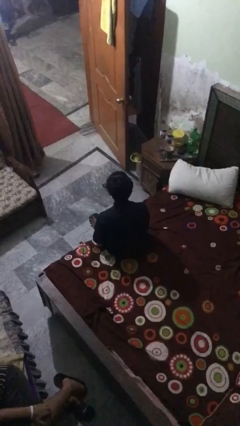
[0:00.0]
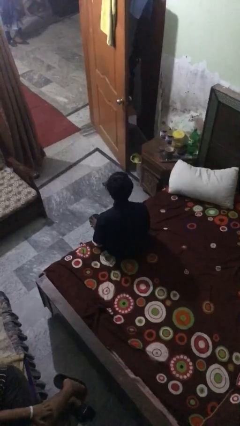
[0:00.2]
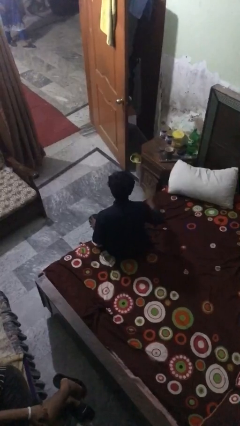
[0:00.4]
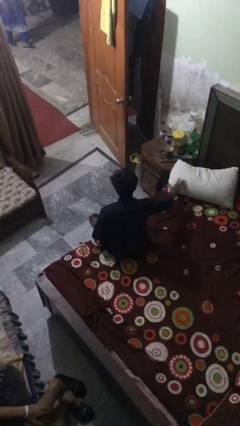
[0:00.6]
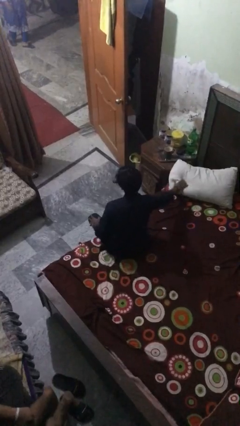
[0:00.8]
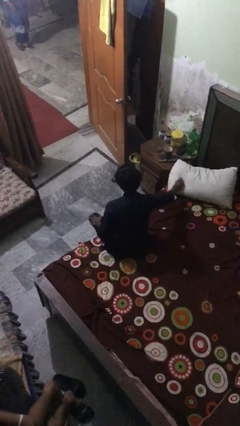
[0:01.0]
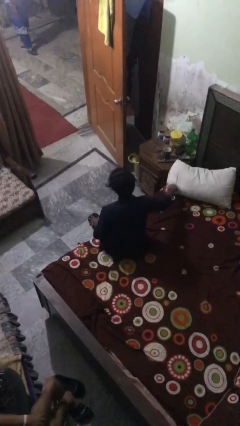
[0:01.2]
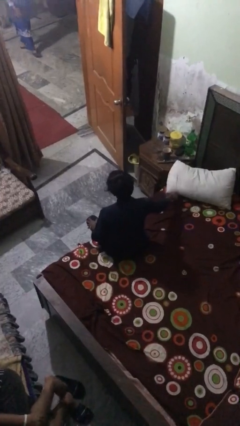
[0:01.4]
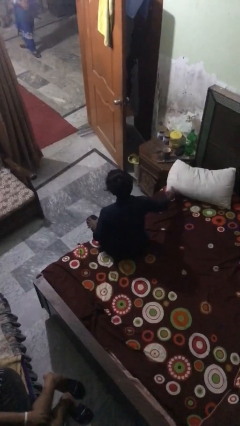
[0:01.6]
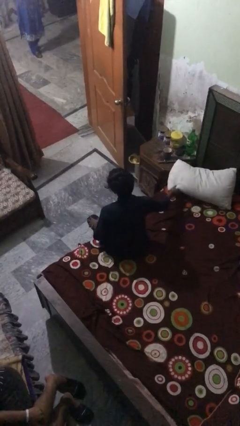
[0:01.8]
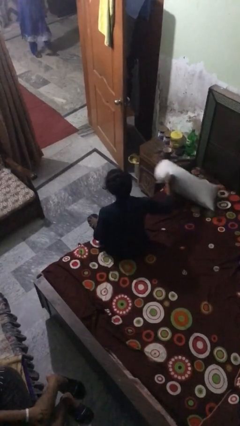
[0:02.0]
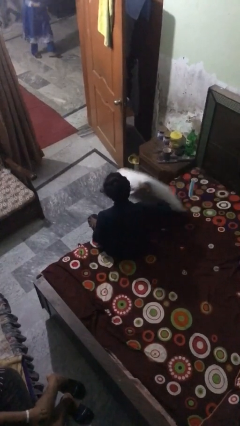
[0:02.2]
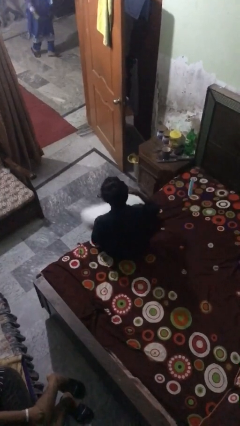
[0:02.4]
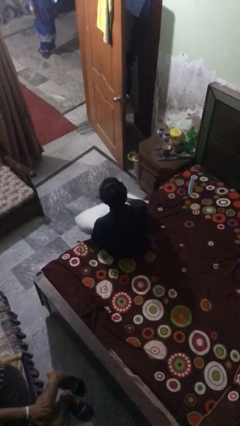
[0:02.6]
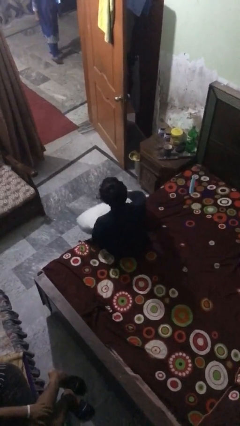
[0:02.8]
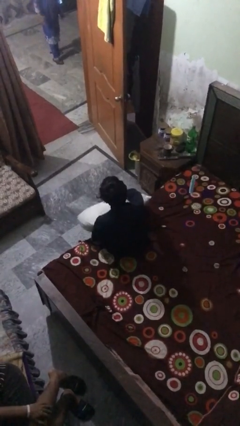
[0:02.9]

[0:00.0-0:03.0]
person picks up object from bed

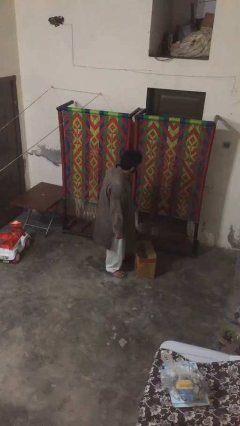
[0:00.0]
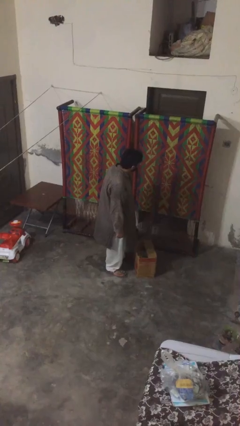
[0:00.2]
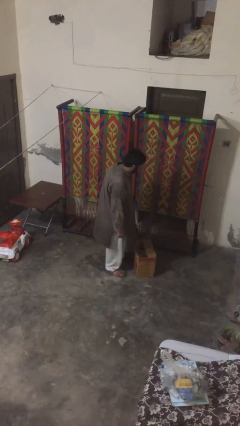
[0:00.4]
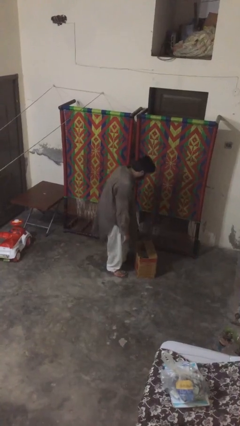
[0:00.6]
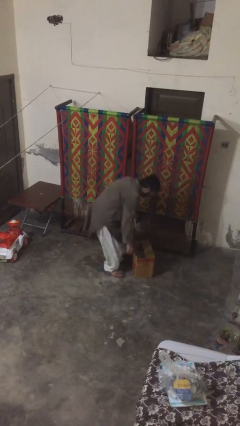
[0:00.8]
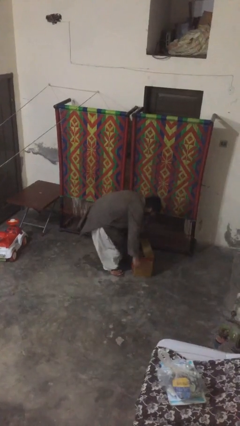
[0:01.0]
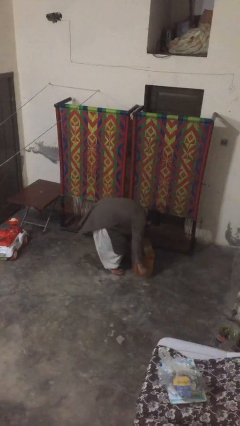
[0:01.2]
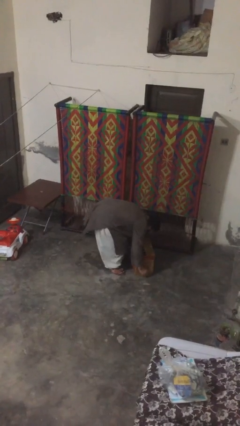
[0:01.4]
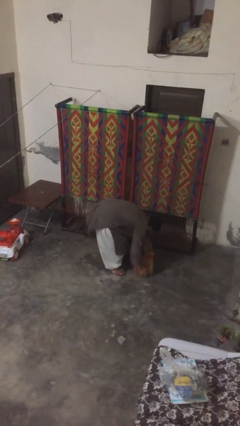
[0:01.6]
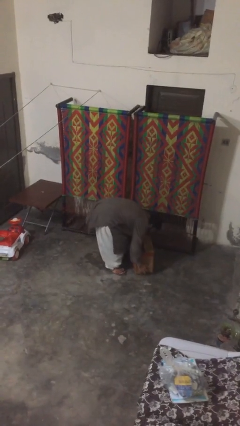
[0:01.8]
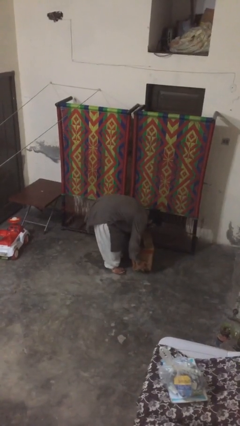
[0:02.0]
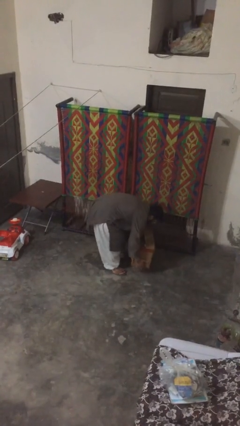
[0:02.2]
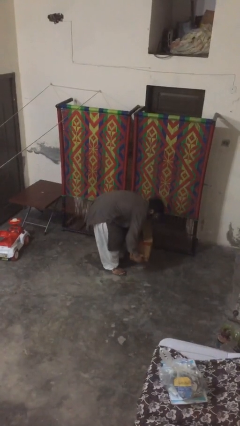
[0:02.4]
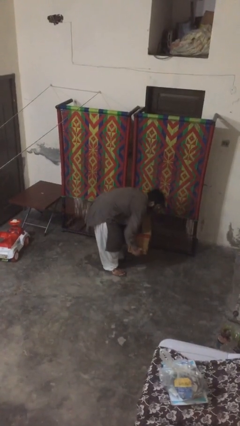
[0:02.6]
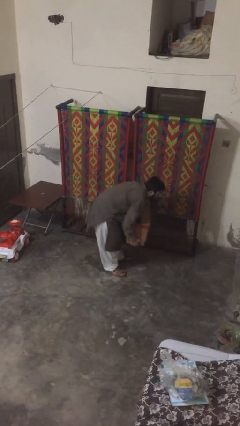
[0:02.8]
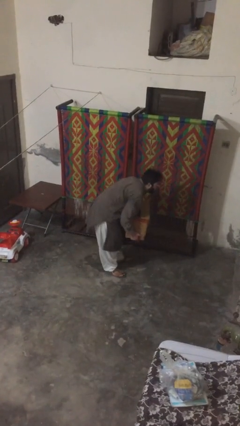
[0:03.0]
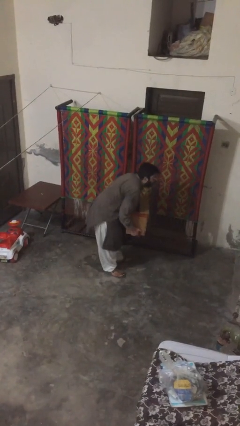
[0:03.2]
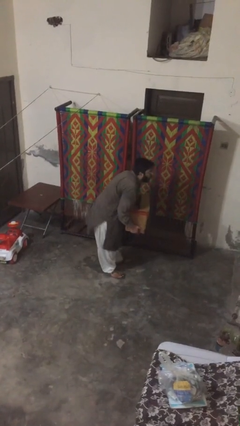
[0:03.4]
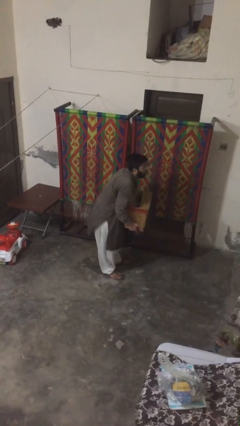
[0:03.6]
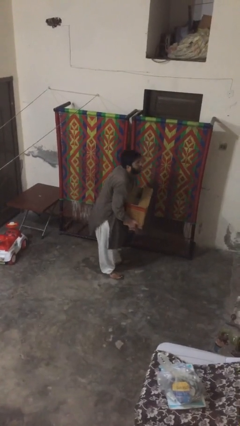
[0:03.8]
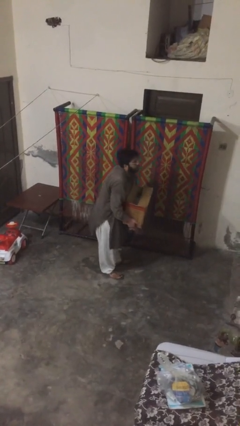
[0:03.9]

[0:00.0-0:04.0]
person picks up object from floor

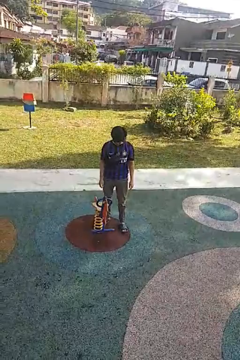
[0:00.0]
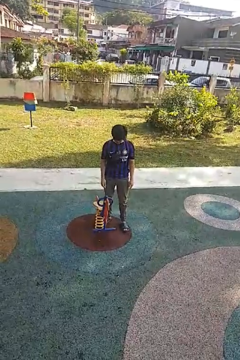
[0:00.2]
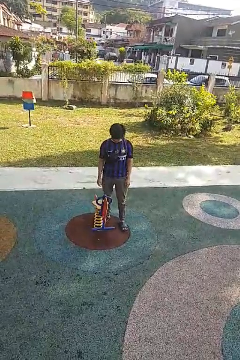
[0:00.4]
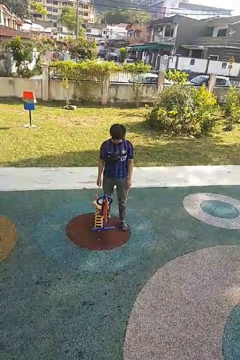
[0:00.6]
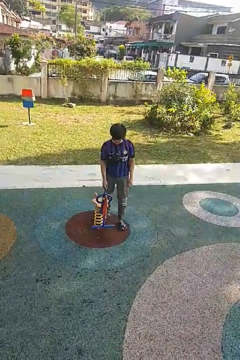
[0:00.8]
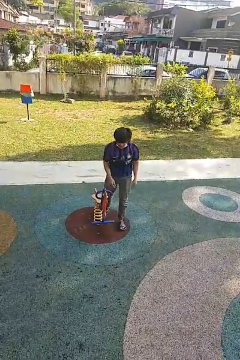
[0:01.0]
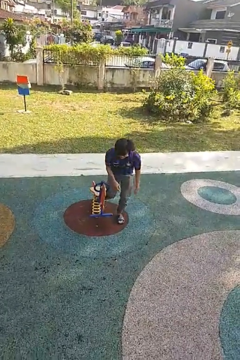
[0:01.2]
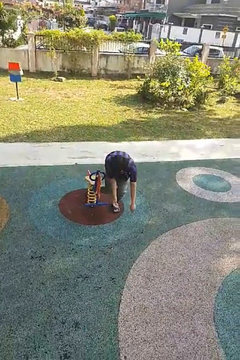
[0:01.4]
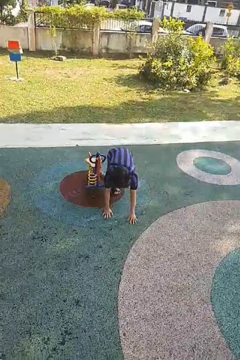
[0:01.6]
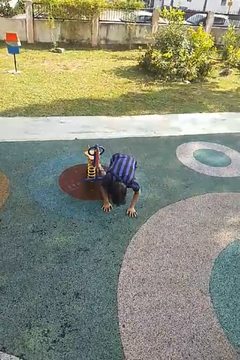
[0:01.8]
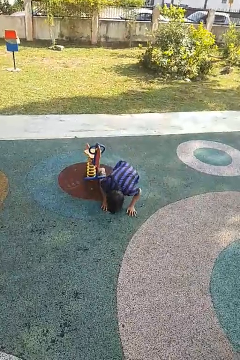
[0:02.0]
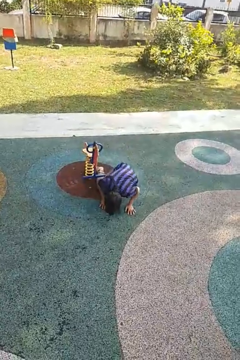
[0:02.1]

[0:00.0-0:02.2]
person trips on object on floor

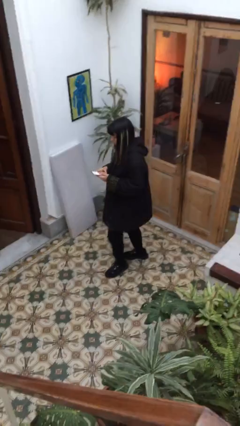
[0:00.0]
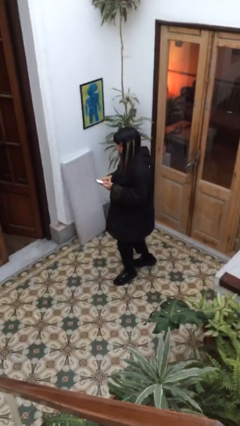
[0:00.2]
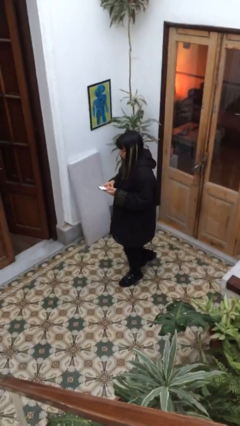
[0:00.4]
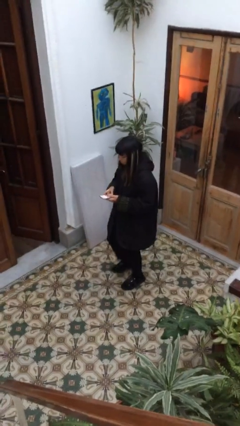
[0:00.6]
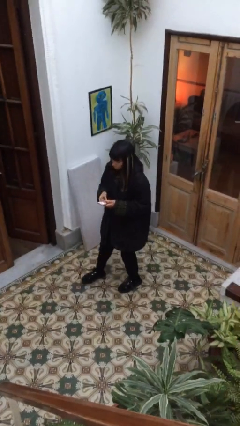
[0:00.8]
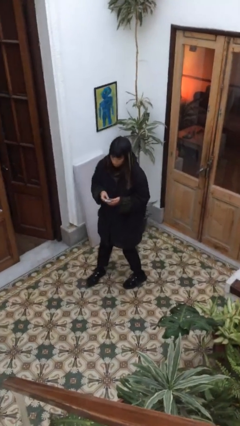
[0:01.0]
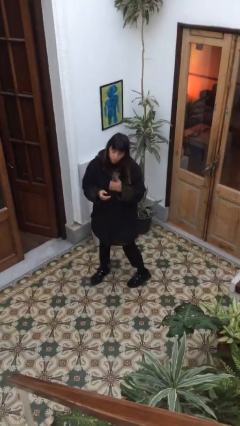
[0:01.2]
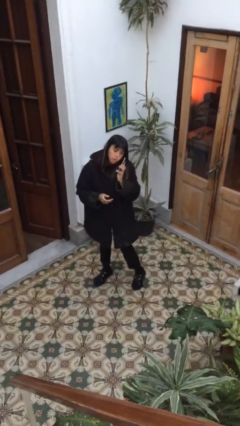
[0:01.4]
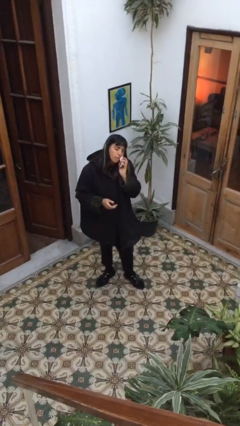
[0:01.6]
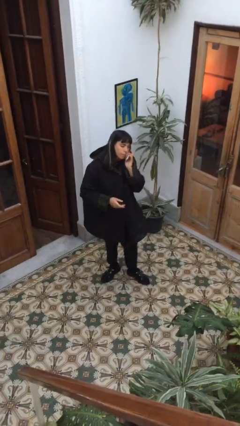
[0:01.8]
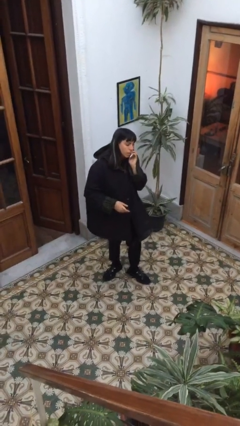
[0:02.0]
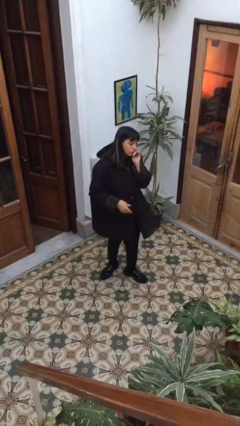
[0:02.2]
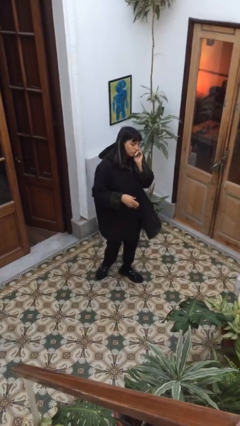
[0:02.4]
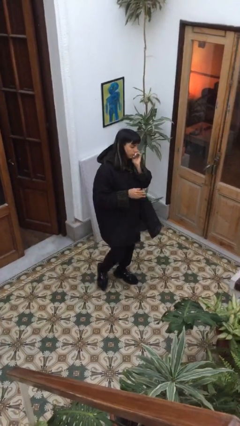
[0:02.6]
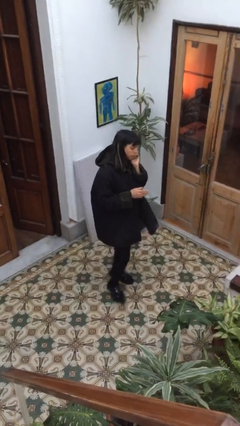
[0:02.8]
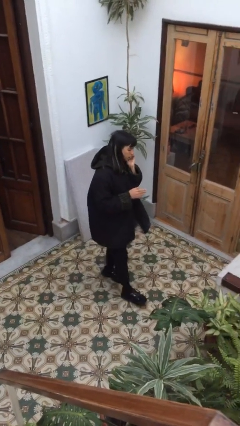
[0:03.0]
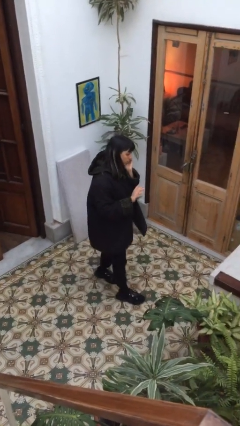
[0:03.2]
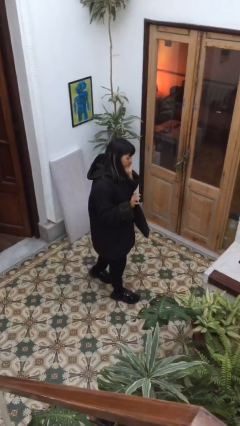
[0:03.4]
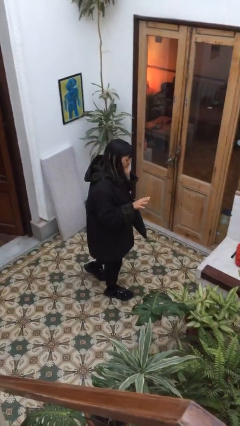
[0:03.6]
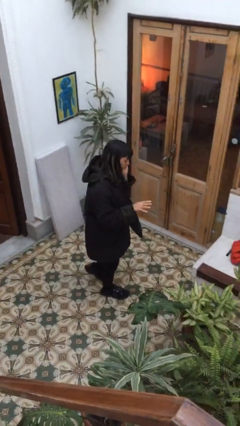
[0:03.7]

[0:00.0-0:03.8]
person talks on phone

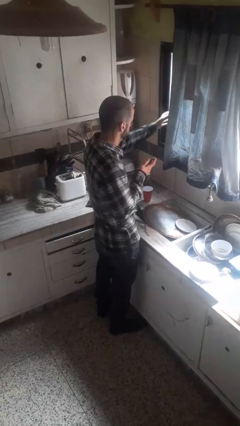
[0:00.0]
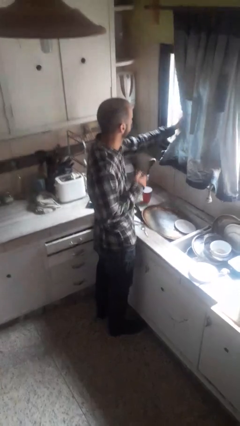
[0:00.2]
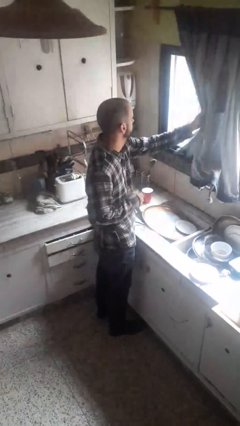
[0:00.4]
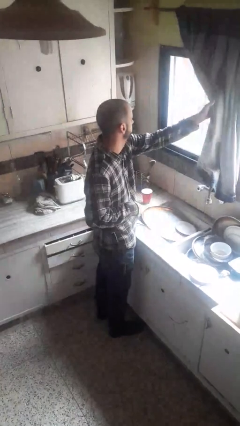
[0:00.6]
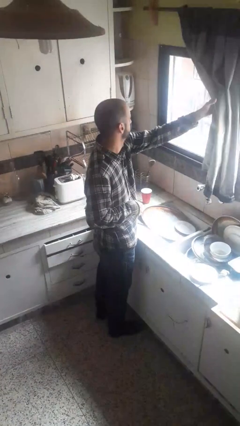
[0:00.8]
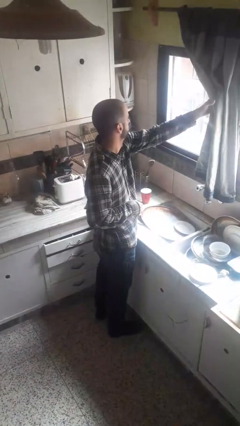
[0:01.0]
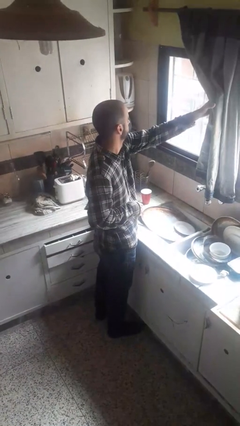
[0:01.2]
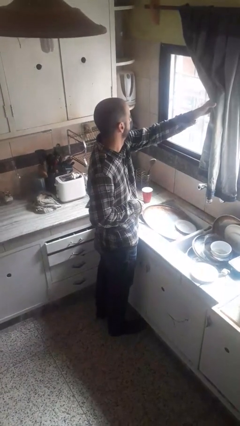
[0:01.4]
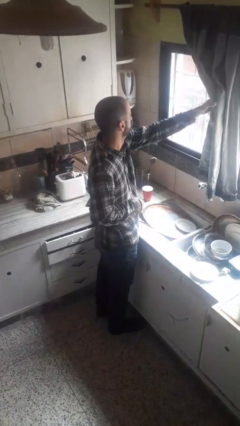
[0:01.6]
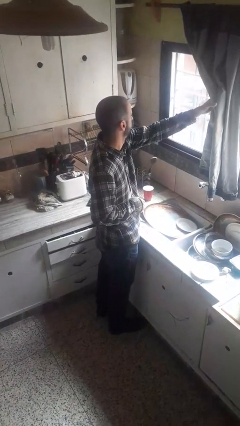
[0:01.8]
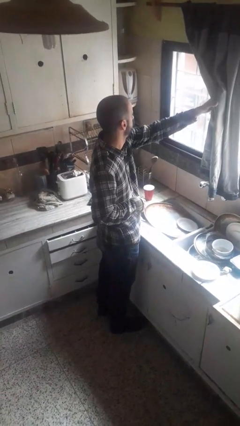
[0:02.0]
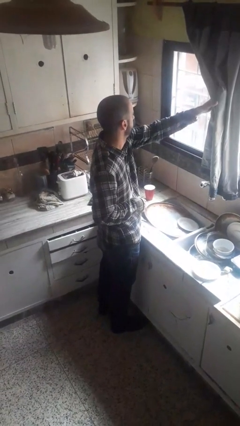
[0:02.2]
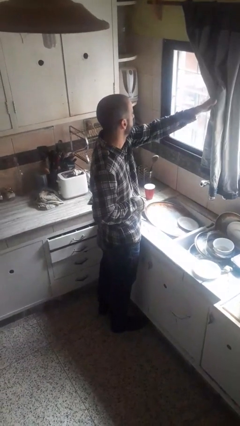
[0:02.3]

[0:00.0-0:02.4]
person opens curtains

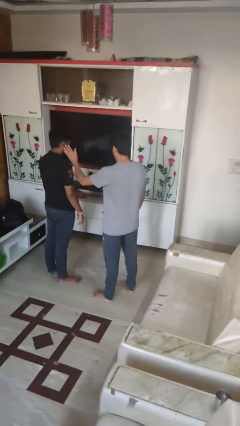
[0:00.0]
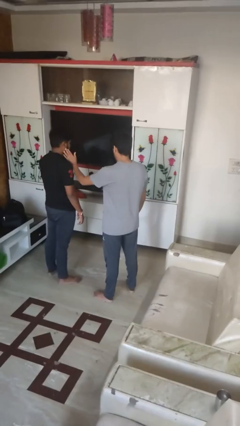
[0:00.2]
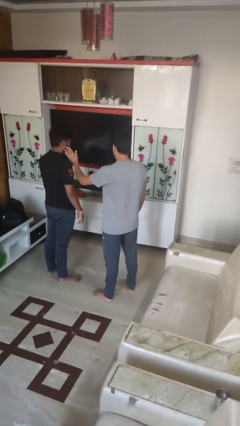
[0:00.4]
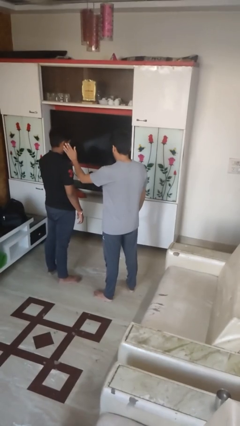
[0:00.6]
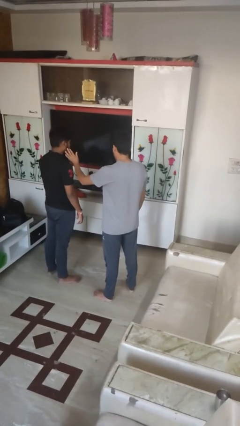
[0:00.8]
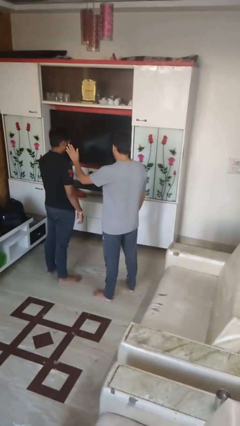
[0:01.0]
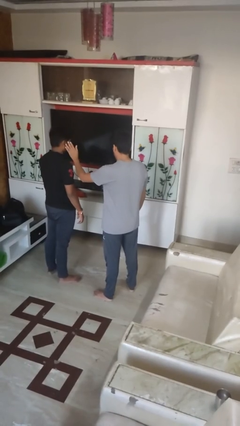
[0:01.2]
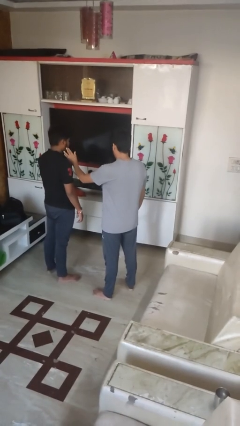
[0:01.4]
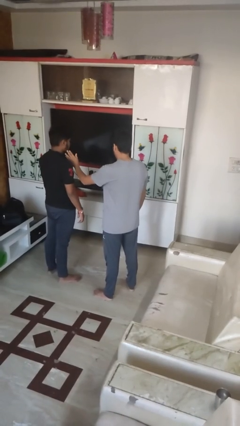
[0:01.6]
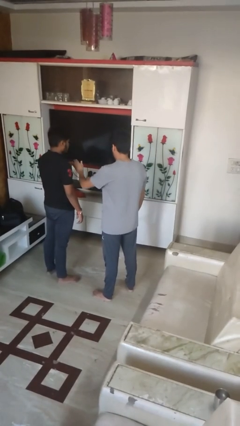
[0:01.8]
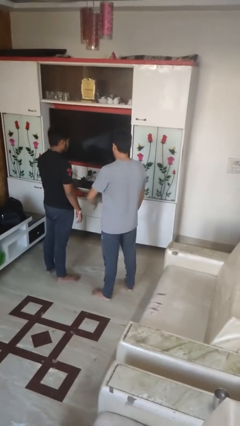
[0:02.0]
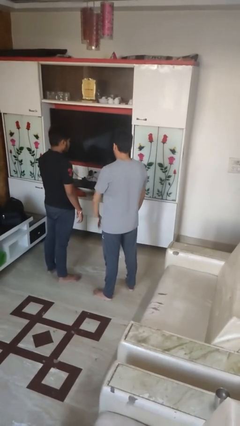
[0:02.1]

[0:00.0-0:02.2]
person touches face of person

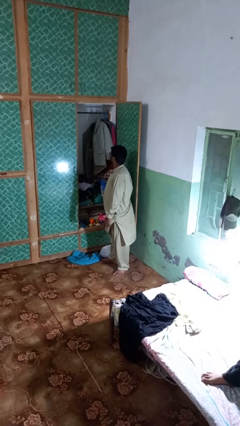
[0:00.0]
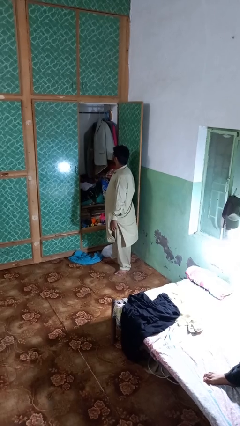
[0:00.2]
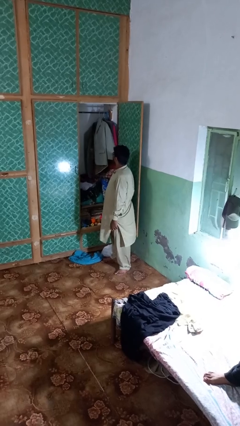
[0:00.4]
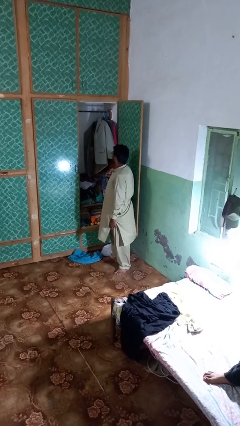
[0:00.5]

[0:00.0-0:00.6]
person takes clothes from closet
